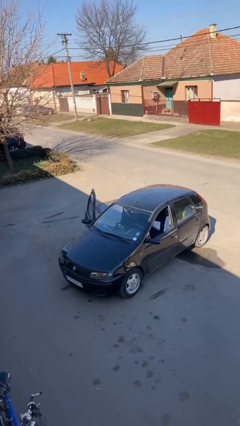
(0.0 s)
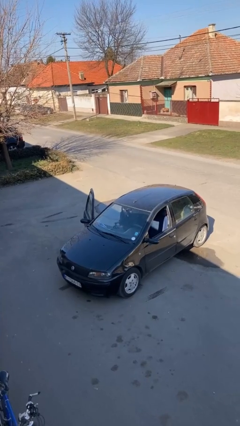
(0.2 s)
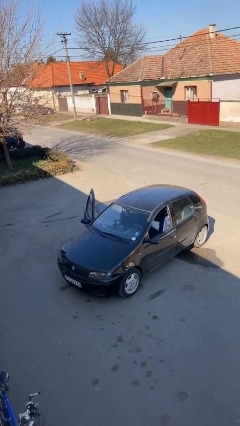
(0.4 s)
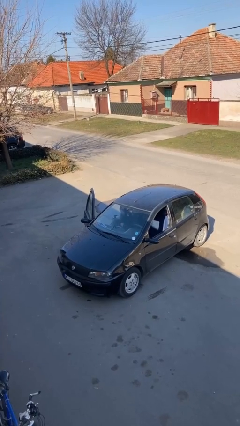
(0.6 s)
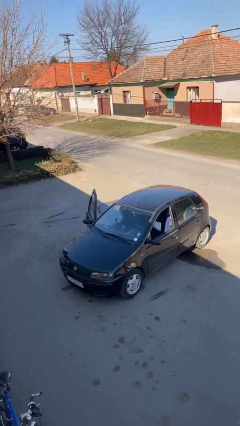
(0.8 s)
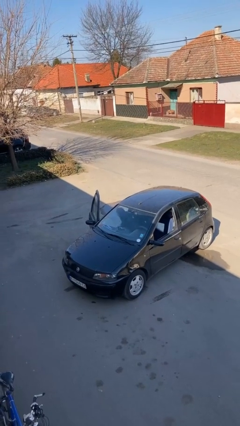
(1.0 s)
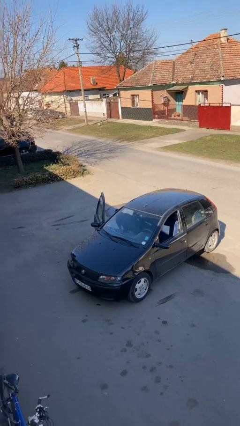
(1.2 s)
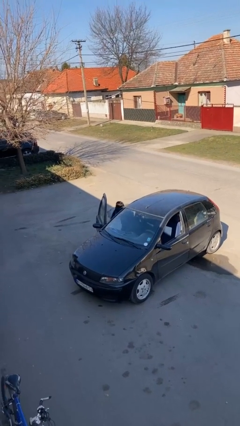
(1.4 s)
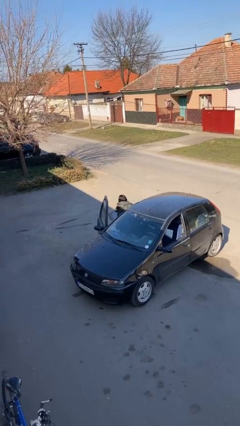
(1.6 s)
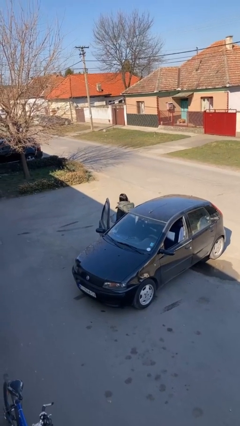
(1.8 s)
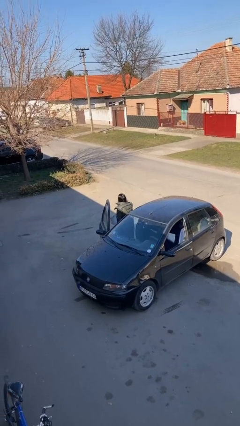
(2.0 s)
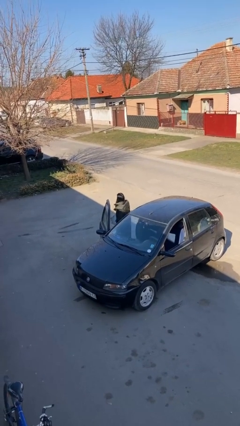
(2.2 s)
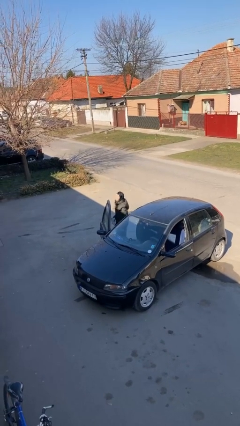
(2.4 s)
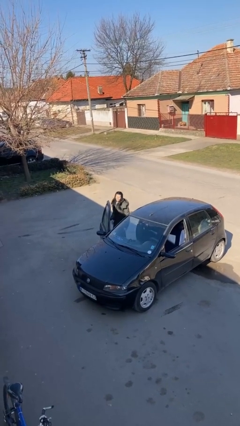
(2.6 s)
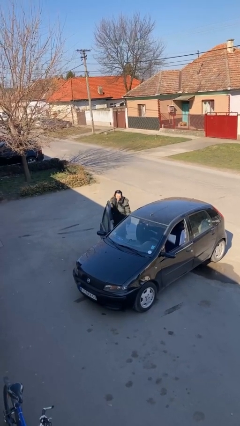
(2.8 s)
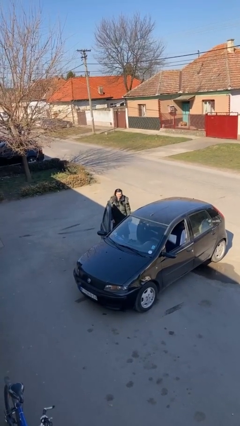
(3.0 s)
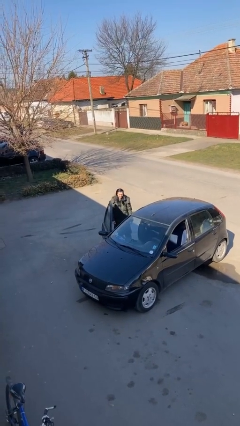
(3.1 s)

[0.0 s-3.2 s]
person exits car

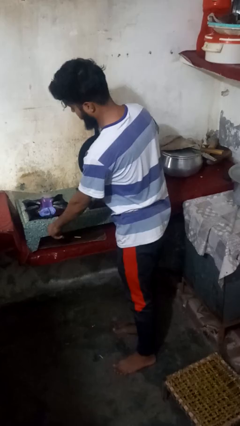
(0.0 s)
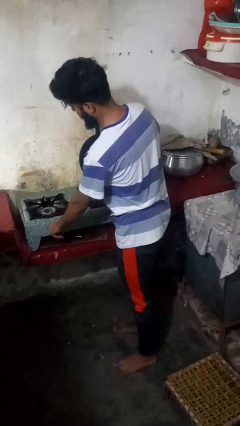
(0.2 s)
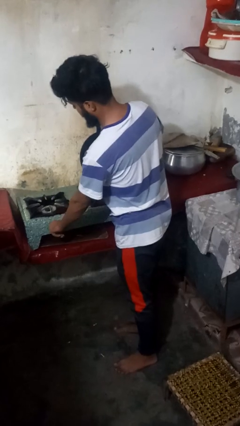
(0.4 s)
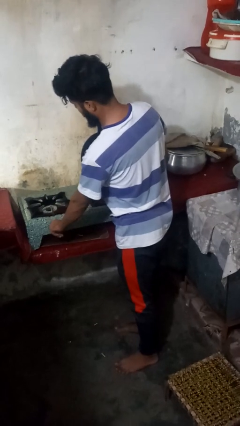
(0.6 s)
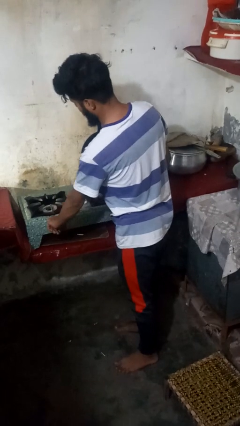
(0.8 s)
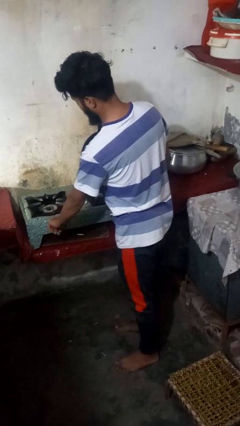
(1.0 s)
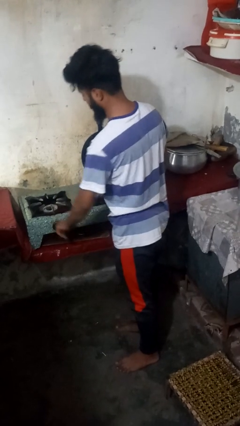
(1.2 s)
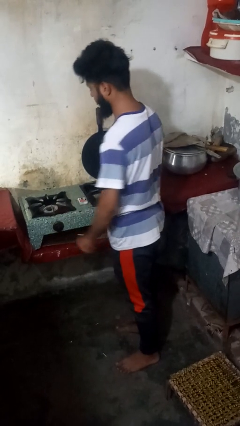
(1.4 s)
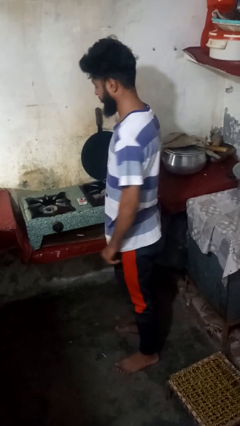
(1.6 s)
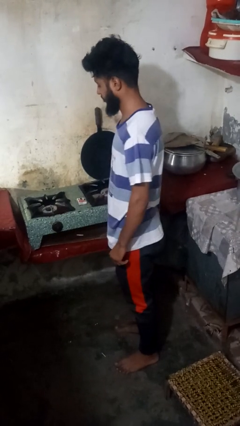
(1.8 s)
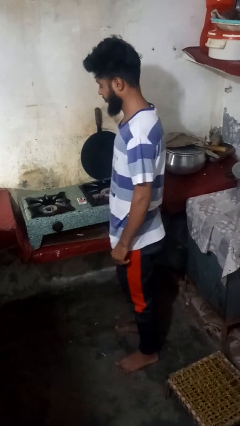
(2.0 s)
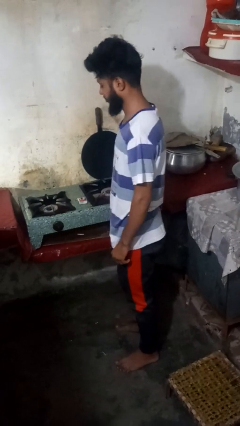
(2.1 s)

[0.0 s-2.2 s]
person turns off stovetop

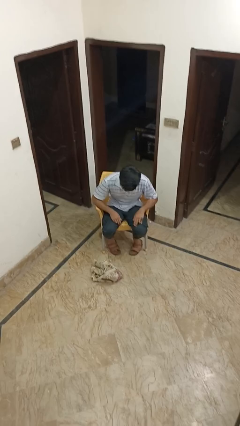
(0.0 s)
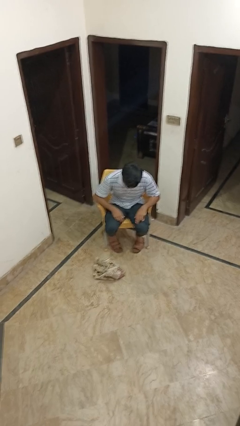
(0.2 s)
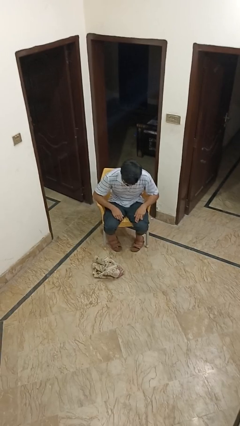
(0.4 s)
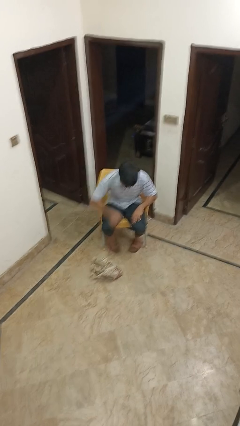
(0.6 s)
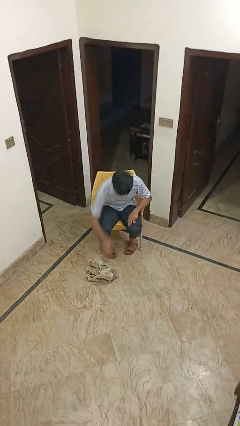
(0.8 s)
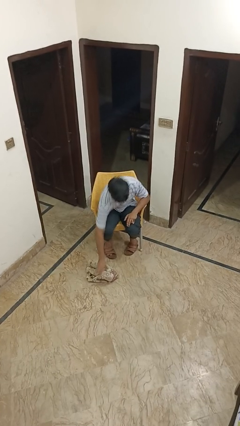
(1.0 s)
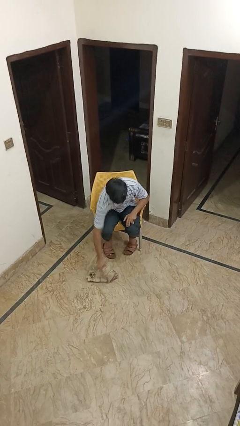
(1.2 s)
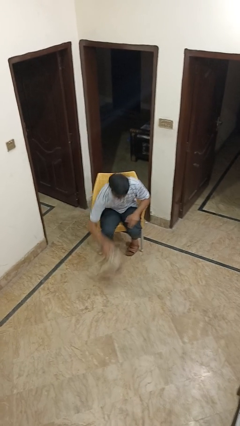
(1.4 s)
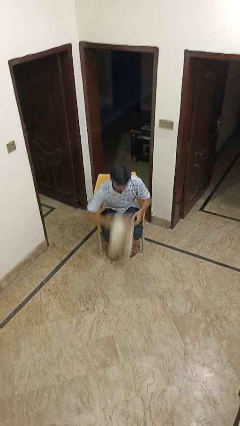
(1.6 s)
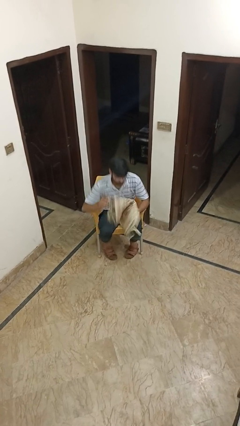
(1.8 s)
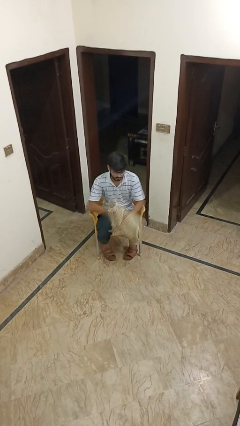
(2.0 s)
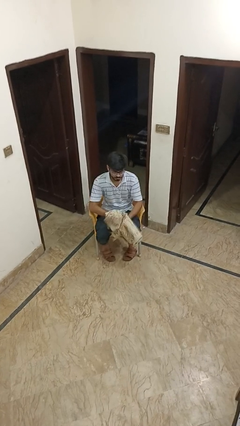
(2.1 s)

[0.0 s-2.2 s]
person picks up object from floor

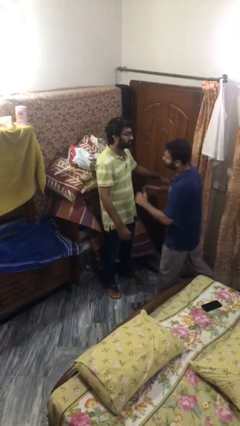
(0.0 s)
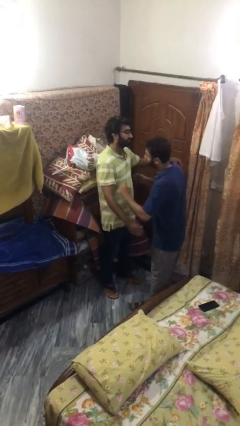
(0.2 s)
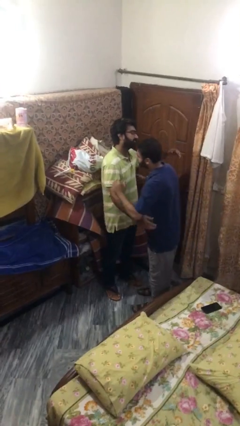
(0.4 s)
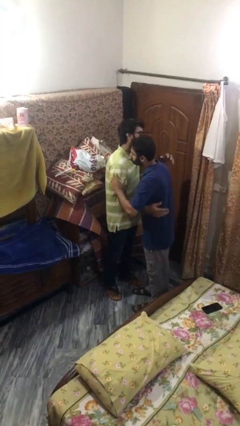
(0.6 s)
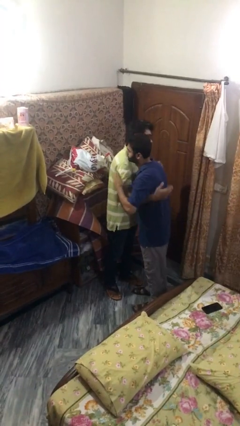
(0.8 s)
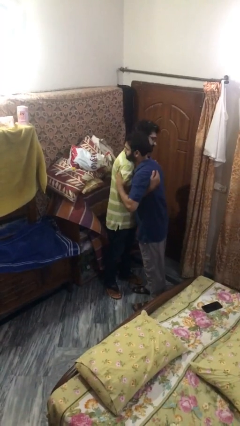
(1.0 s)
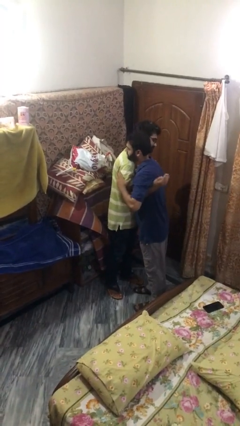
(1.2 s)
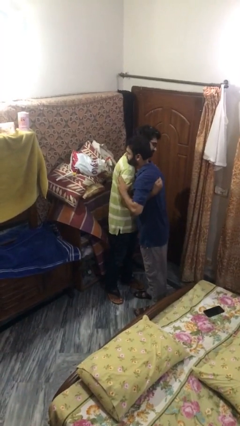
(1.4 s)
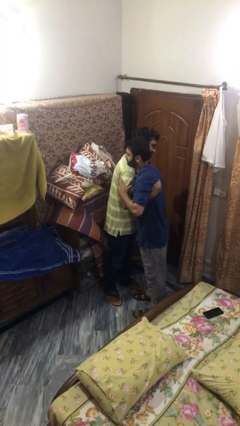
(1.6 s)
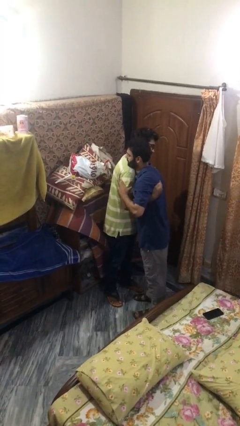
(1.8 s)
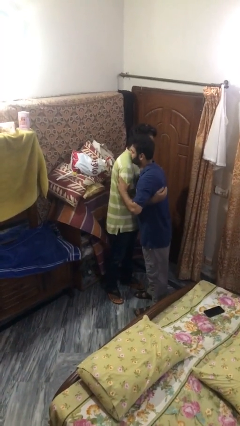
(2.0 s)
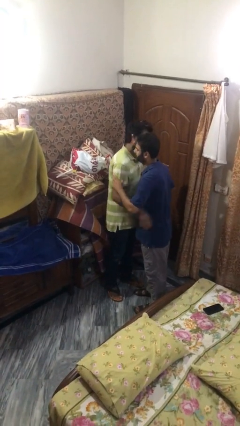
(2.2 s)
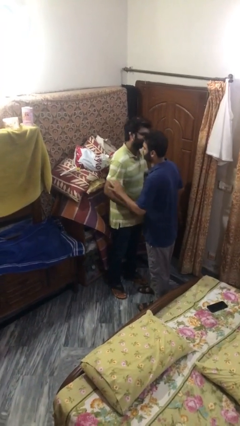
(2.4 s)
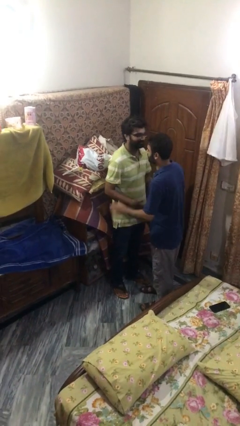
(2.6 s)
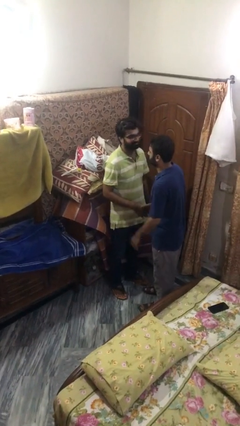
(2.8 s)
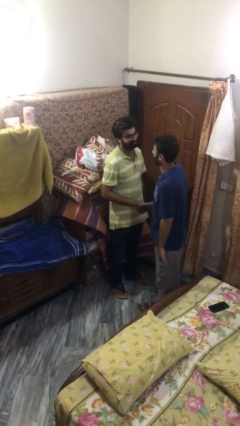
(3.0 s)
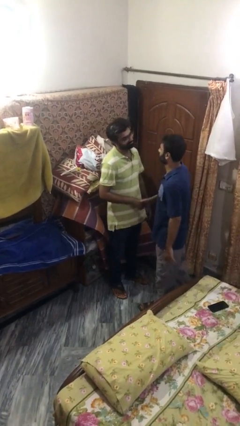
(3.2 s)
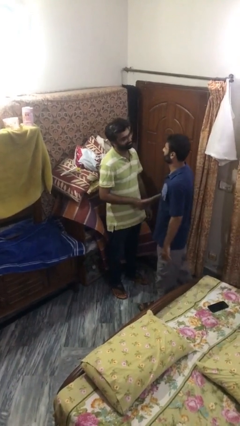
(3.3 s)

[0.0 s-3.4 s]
person embraces person

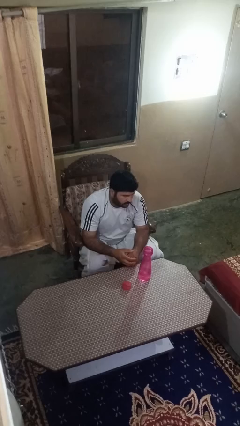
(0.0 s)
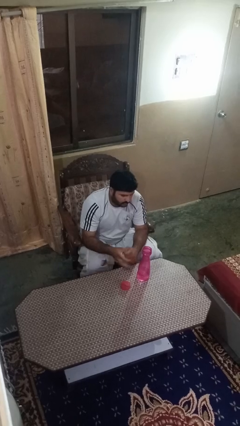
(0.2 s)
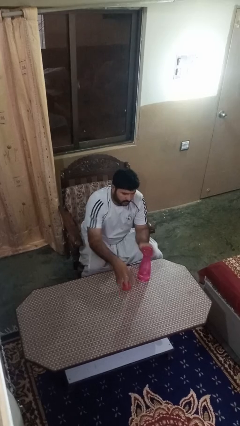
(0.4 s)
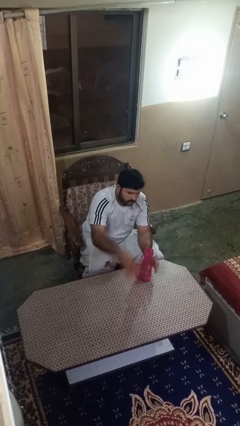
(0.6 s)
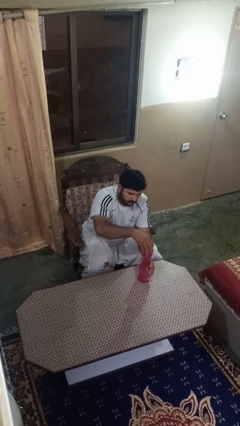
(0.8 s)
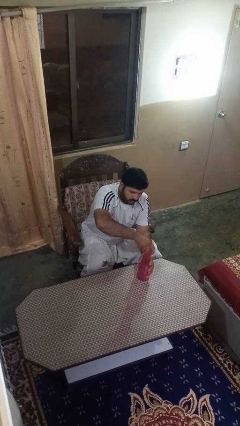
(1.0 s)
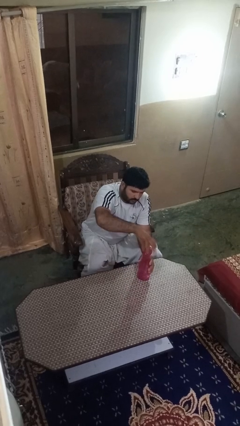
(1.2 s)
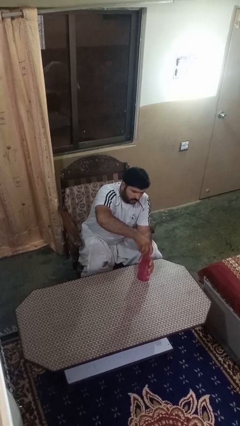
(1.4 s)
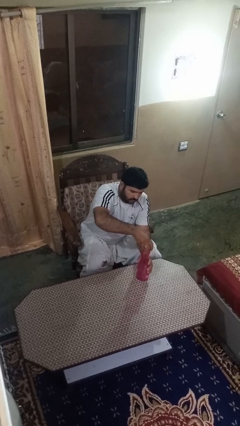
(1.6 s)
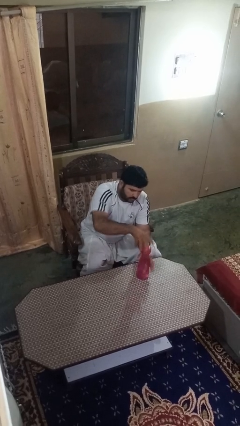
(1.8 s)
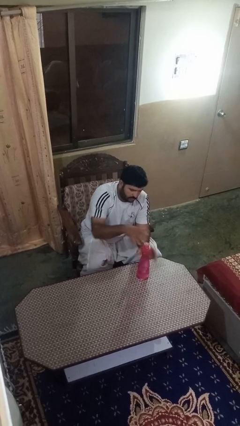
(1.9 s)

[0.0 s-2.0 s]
person screws lid to bottle

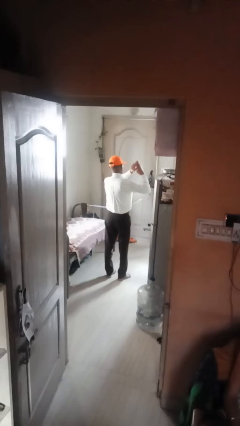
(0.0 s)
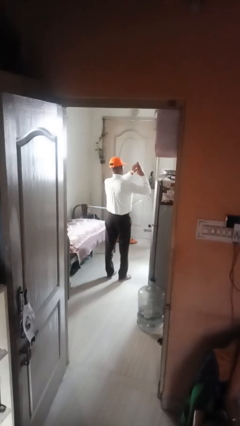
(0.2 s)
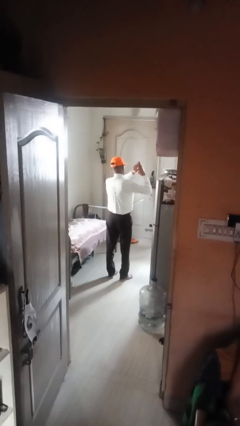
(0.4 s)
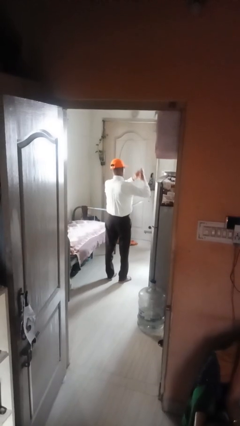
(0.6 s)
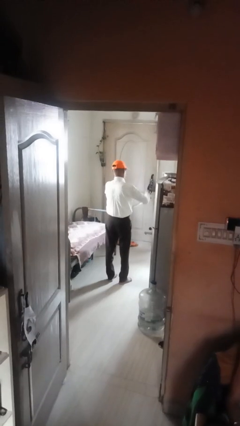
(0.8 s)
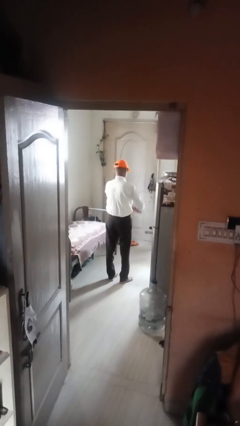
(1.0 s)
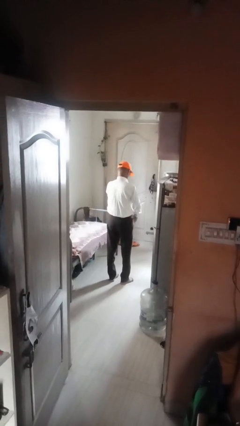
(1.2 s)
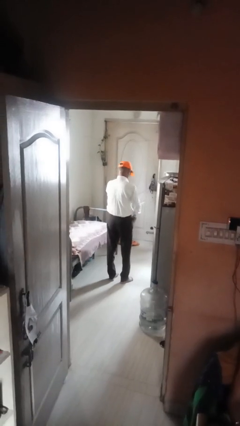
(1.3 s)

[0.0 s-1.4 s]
person gestures heart

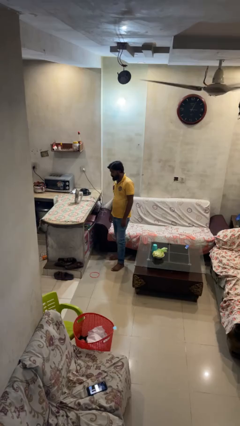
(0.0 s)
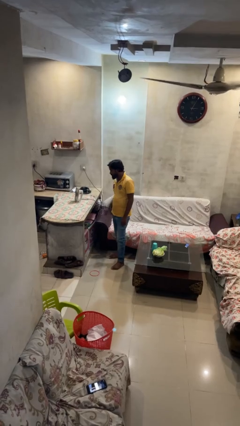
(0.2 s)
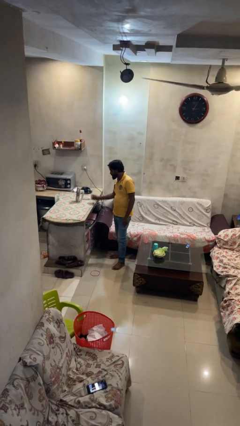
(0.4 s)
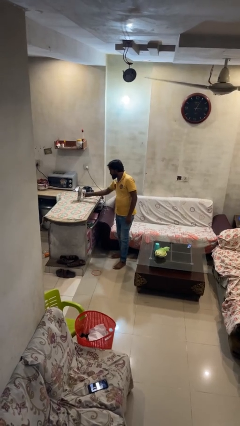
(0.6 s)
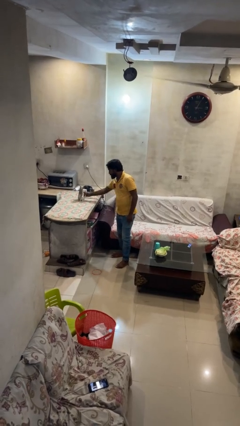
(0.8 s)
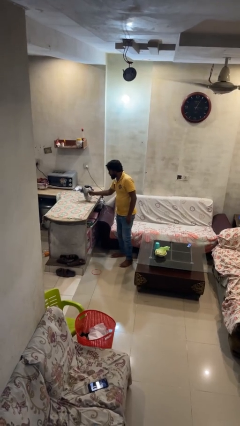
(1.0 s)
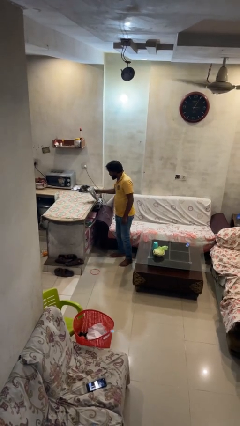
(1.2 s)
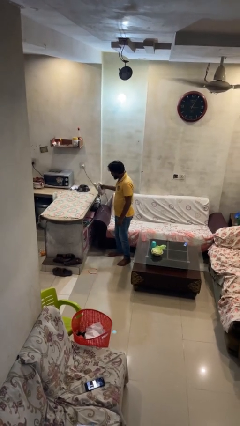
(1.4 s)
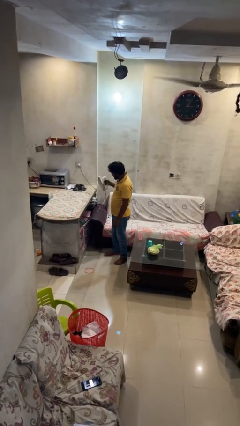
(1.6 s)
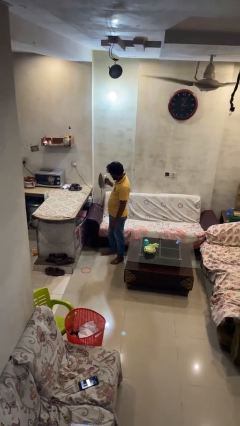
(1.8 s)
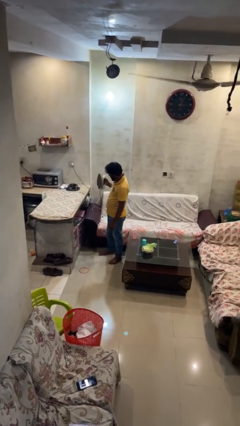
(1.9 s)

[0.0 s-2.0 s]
person picks up object from countertop

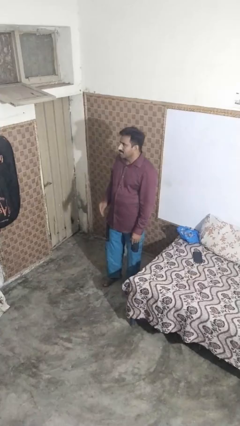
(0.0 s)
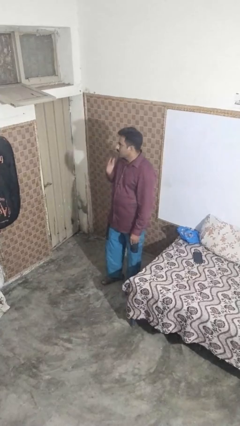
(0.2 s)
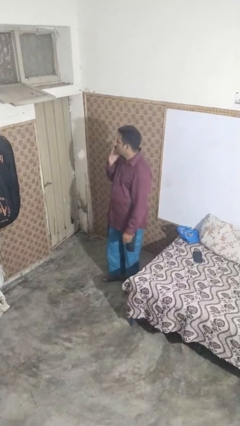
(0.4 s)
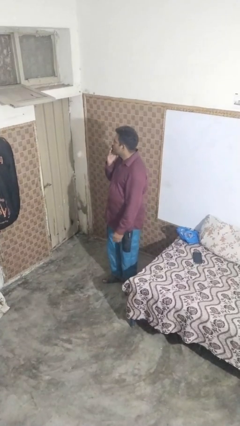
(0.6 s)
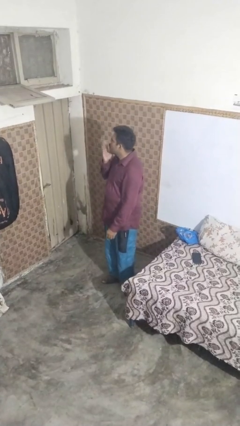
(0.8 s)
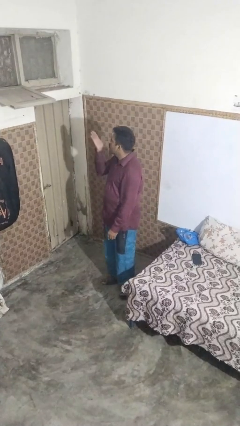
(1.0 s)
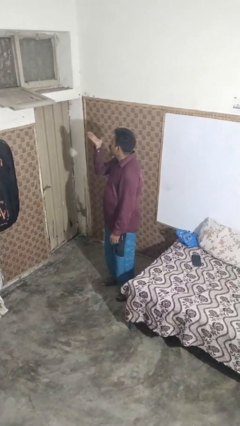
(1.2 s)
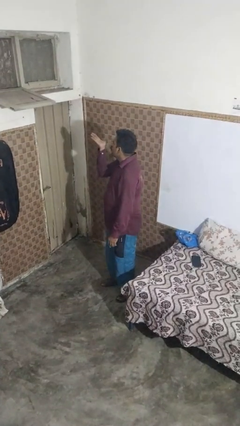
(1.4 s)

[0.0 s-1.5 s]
person gestures blow kiss
